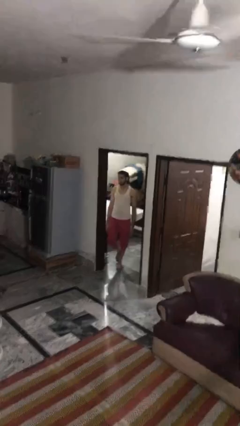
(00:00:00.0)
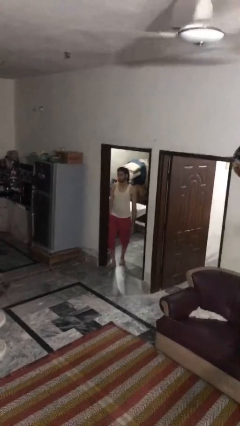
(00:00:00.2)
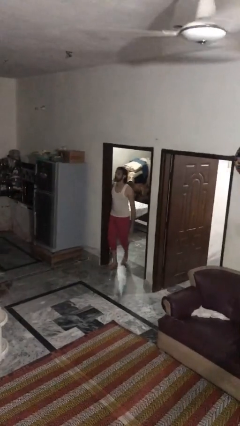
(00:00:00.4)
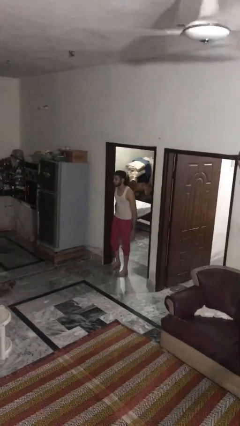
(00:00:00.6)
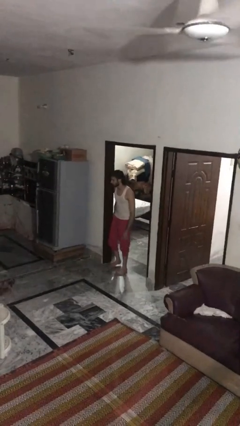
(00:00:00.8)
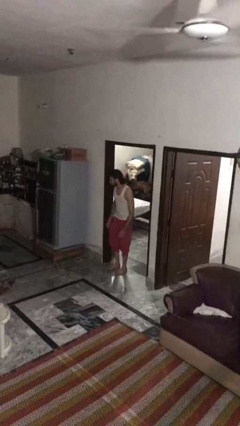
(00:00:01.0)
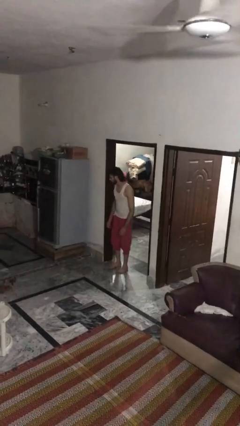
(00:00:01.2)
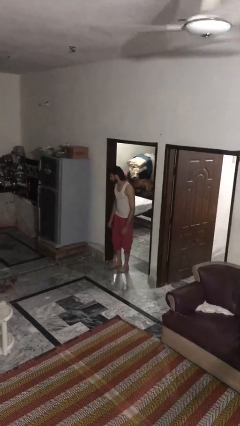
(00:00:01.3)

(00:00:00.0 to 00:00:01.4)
person bumps into wall

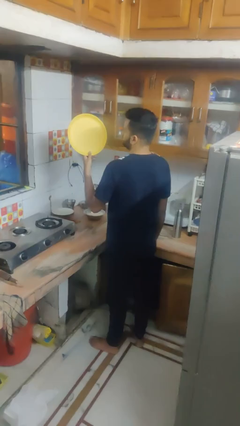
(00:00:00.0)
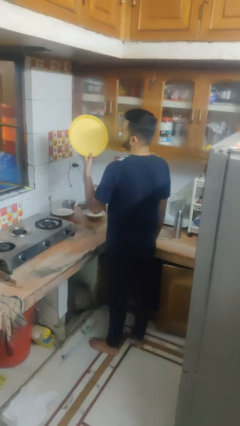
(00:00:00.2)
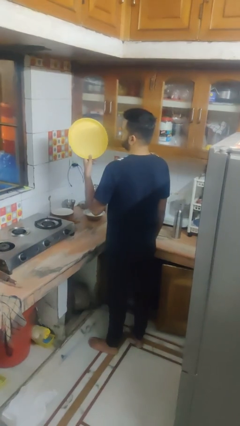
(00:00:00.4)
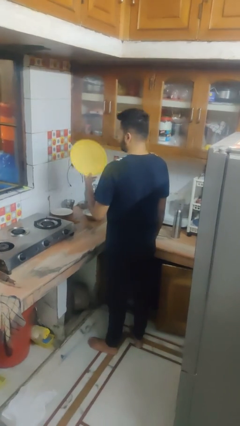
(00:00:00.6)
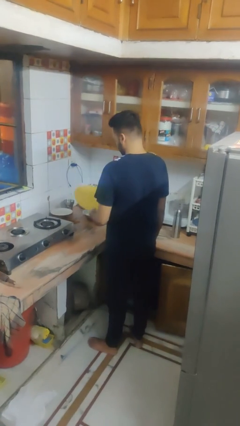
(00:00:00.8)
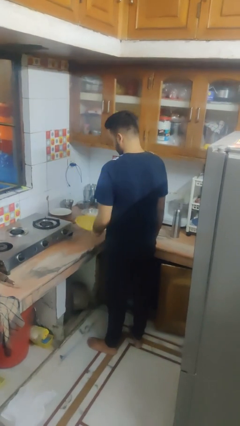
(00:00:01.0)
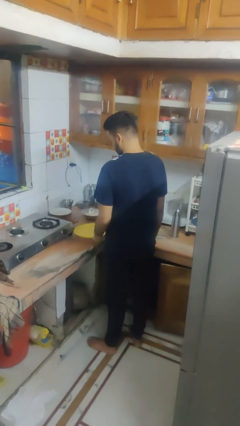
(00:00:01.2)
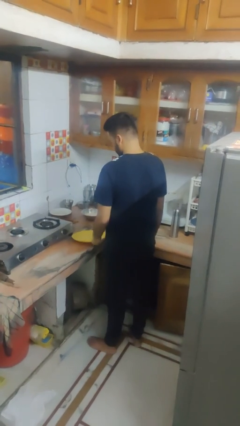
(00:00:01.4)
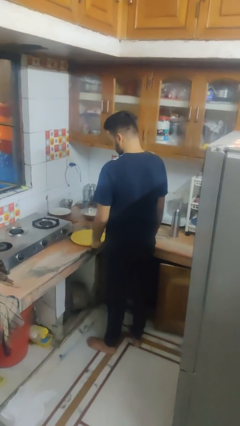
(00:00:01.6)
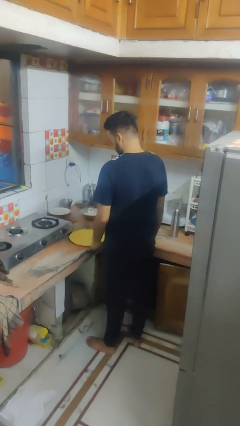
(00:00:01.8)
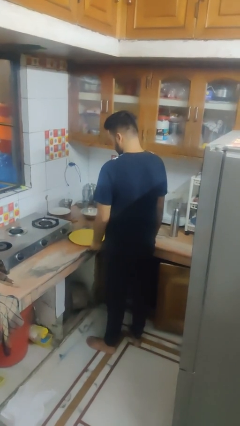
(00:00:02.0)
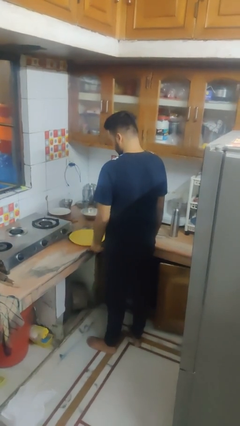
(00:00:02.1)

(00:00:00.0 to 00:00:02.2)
person puts down object on countertop

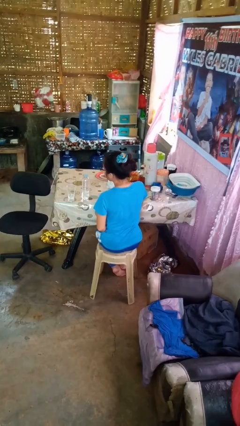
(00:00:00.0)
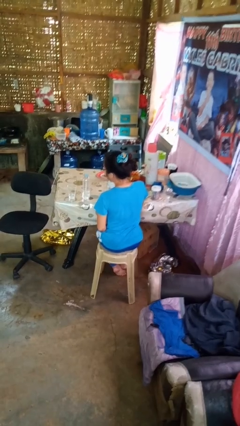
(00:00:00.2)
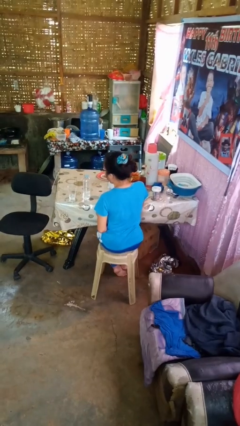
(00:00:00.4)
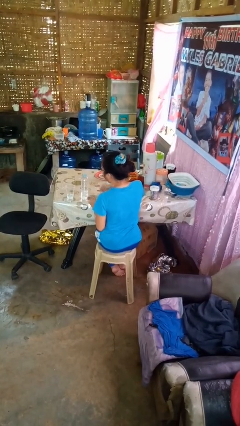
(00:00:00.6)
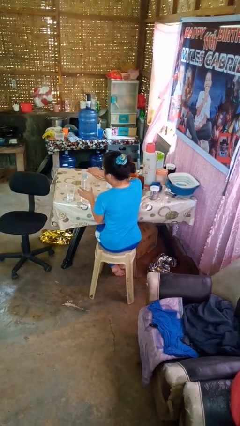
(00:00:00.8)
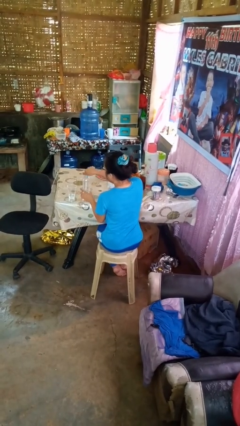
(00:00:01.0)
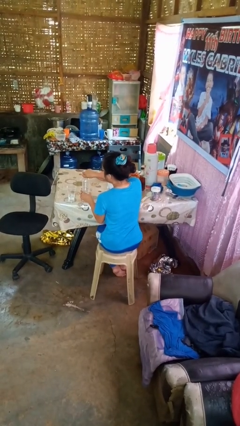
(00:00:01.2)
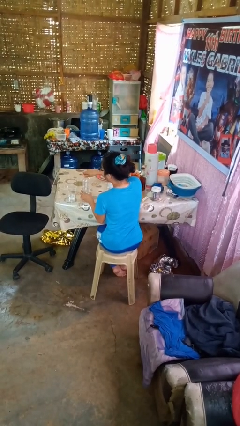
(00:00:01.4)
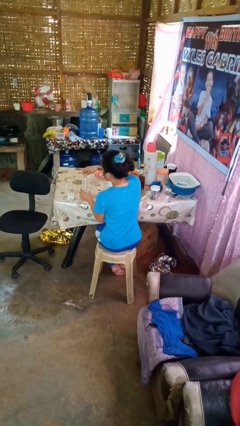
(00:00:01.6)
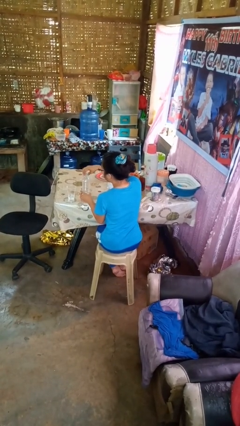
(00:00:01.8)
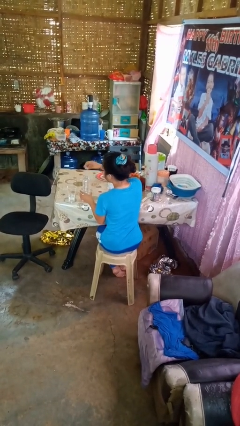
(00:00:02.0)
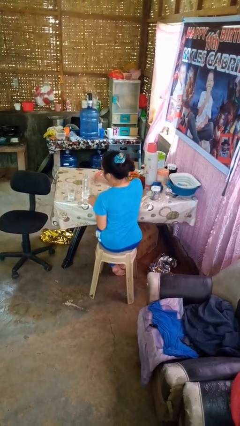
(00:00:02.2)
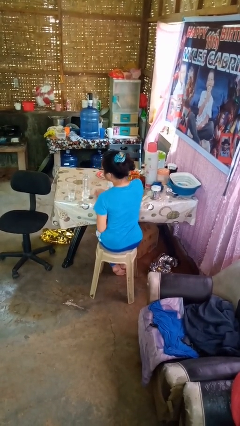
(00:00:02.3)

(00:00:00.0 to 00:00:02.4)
person unscrews lid from bottle

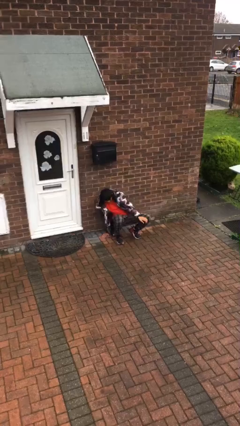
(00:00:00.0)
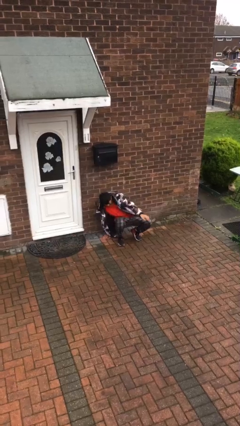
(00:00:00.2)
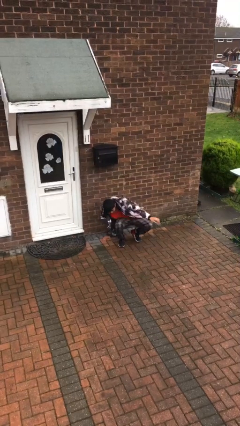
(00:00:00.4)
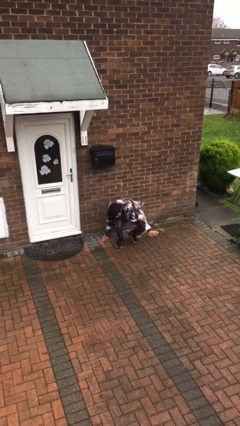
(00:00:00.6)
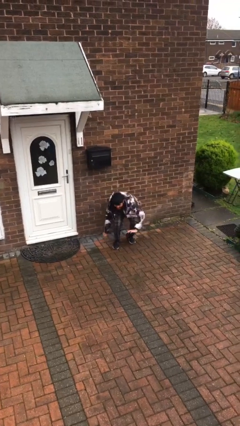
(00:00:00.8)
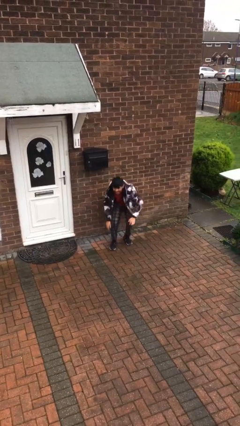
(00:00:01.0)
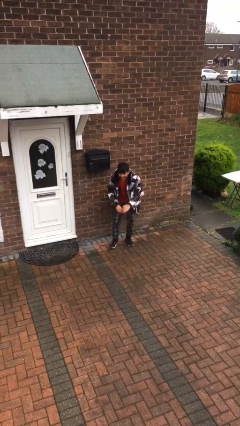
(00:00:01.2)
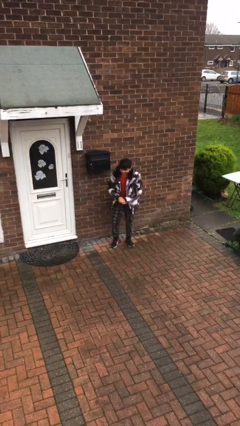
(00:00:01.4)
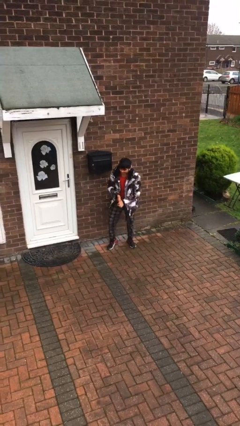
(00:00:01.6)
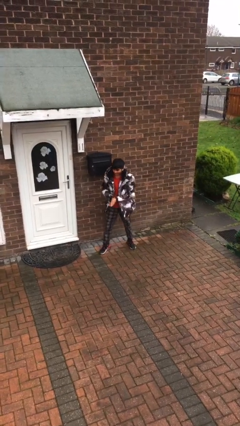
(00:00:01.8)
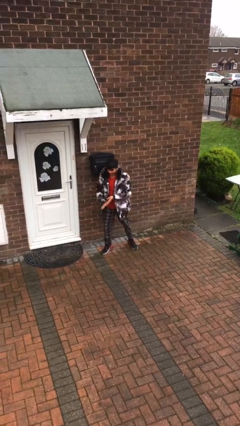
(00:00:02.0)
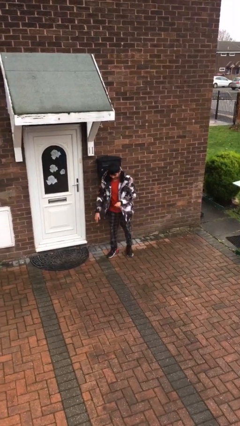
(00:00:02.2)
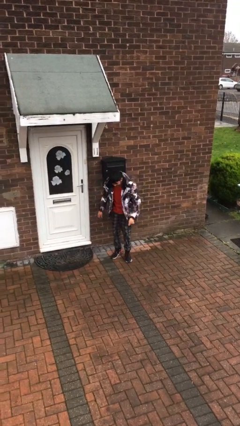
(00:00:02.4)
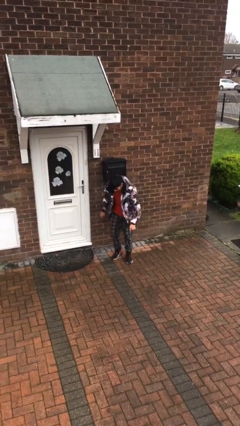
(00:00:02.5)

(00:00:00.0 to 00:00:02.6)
person stands up

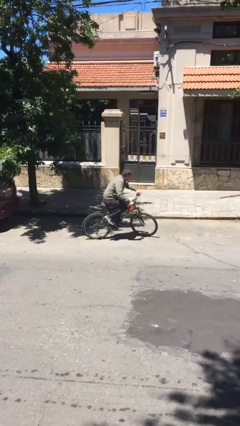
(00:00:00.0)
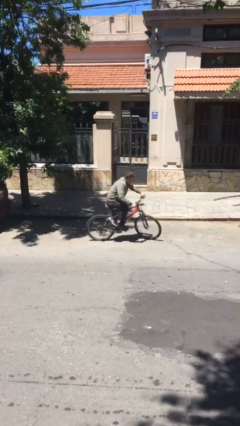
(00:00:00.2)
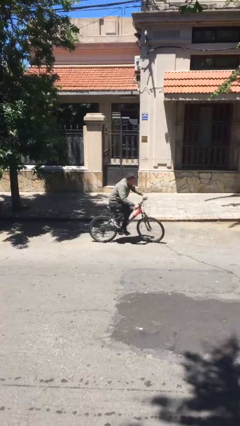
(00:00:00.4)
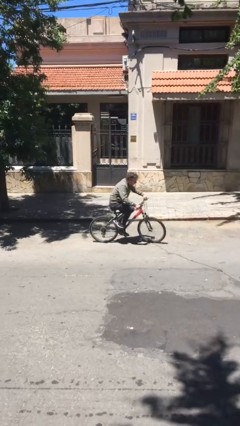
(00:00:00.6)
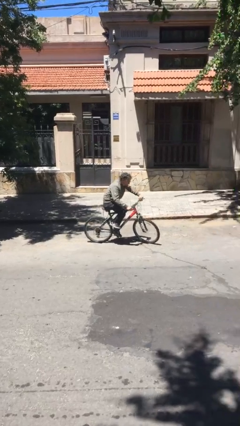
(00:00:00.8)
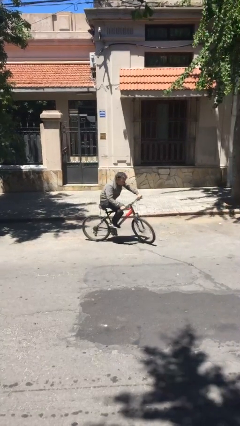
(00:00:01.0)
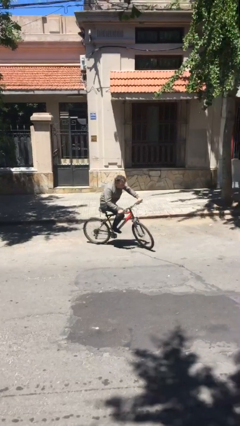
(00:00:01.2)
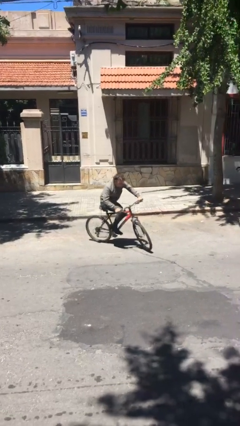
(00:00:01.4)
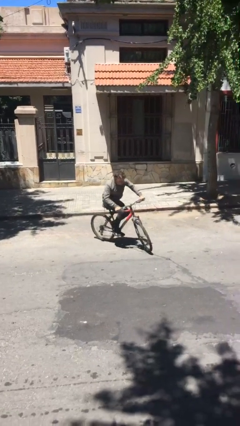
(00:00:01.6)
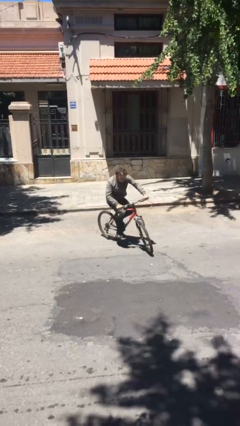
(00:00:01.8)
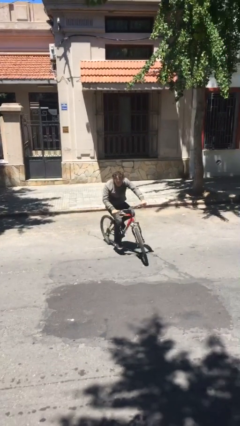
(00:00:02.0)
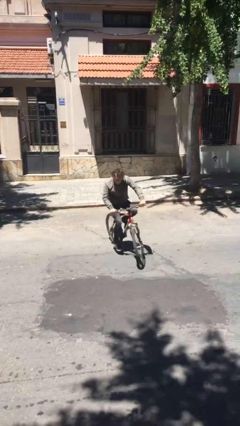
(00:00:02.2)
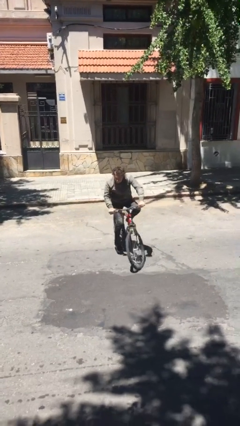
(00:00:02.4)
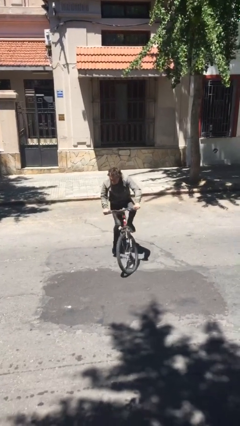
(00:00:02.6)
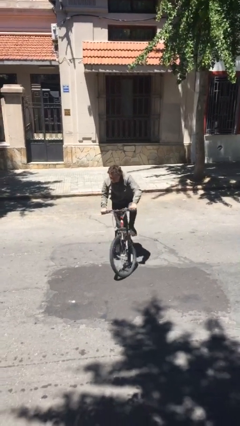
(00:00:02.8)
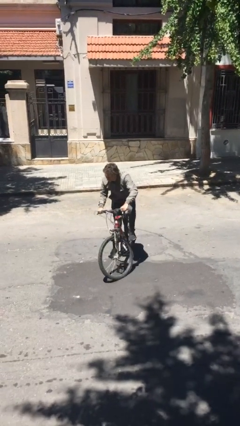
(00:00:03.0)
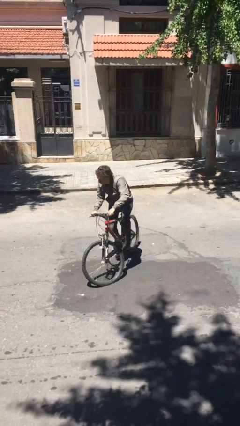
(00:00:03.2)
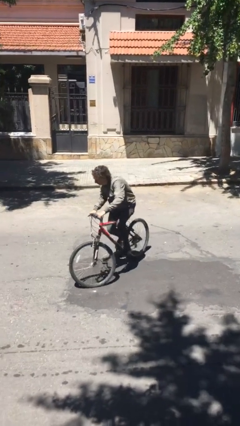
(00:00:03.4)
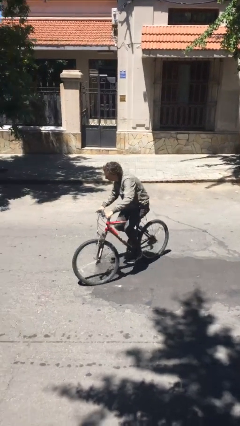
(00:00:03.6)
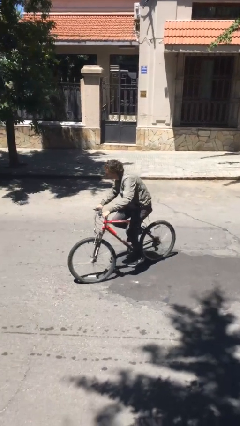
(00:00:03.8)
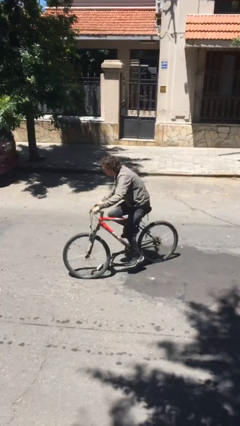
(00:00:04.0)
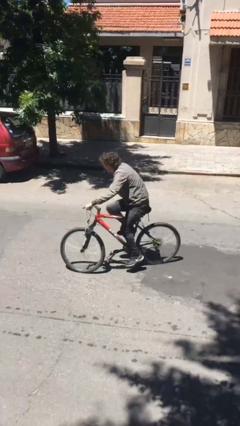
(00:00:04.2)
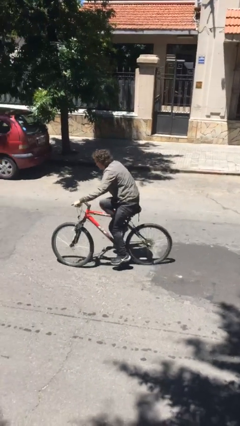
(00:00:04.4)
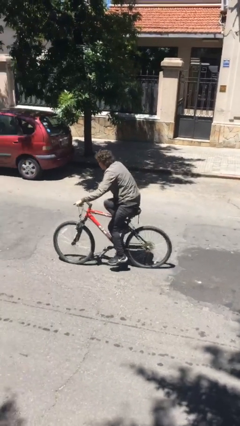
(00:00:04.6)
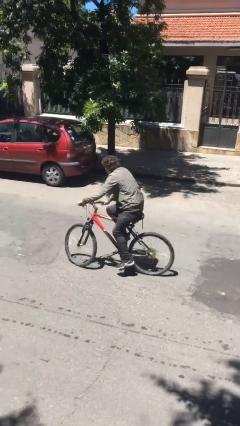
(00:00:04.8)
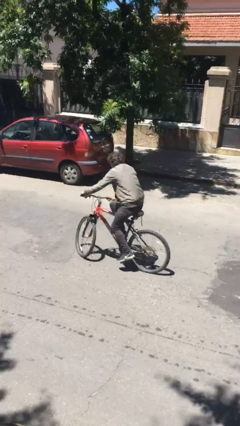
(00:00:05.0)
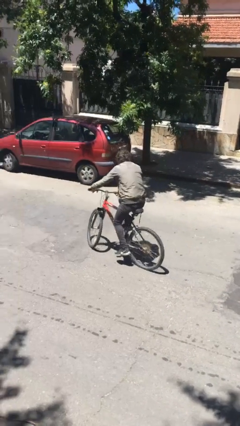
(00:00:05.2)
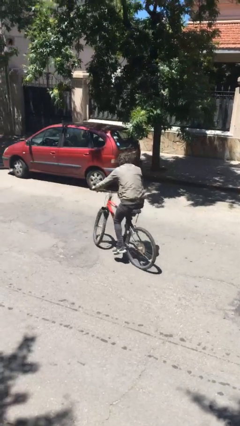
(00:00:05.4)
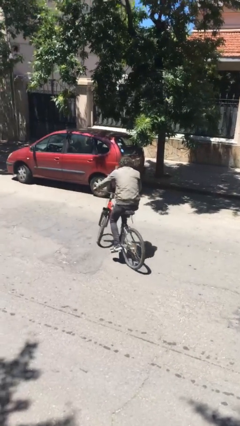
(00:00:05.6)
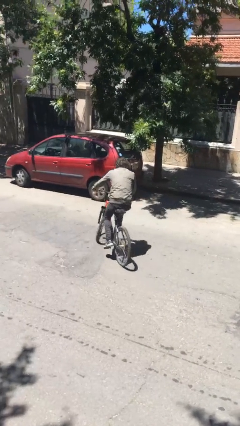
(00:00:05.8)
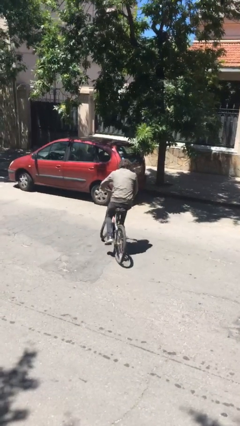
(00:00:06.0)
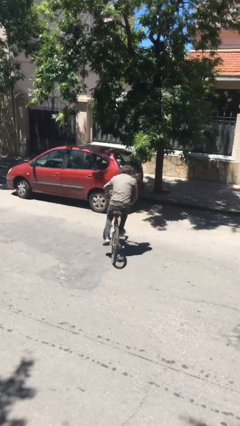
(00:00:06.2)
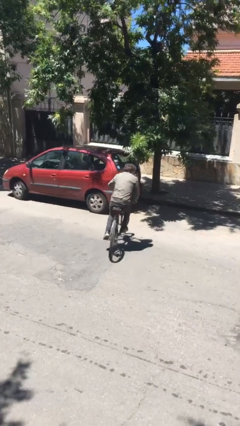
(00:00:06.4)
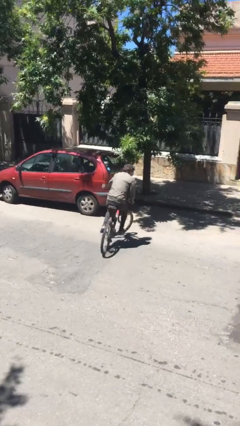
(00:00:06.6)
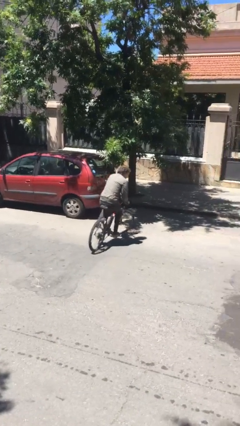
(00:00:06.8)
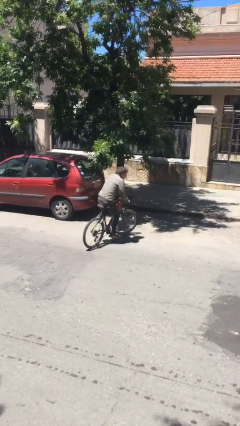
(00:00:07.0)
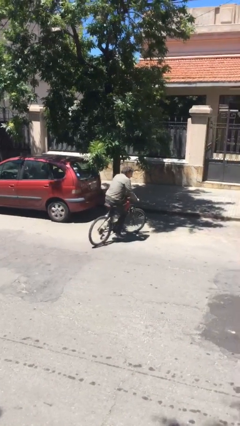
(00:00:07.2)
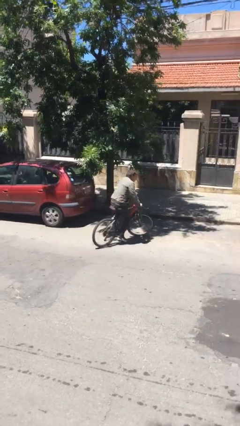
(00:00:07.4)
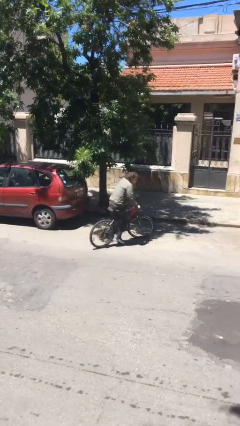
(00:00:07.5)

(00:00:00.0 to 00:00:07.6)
person rides bicycle

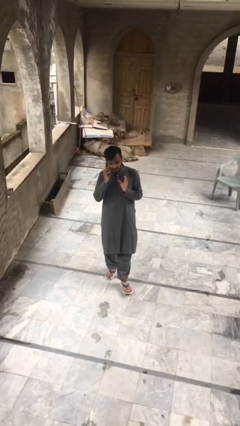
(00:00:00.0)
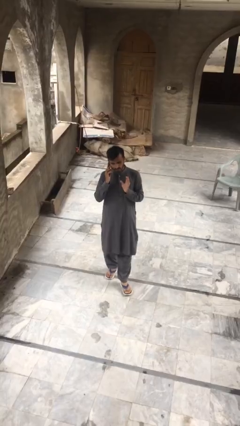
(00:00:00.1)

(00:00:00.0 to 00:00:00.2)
person texts on phone

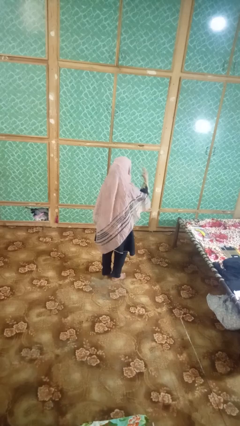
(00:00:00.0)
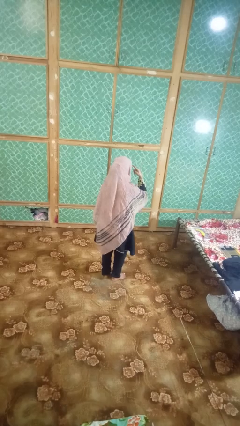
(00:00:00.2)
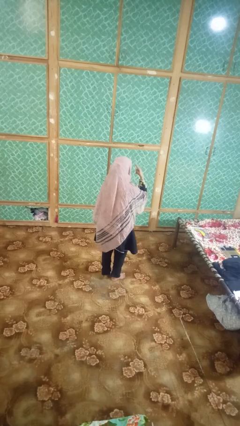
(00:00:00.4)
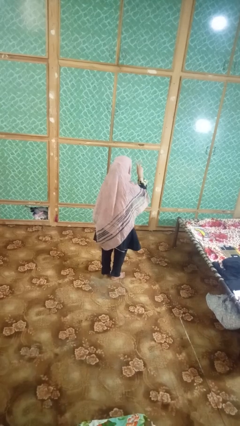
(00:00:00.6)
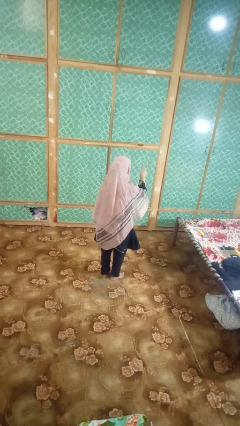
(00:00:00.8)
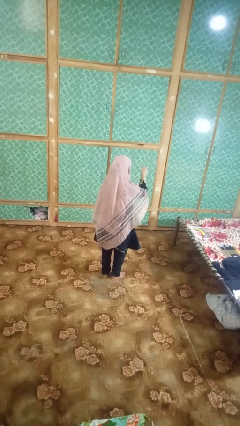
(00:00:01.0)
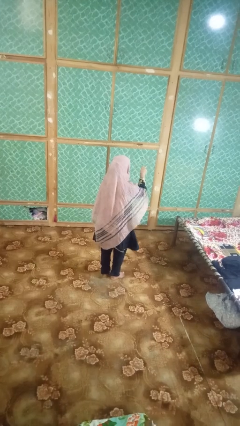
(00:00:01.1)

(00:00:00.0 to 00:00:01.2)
person gestures behind me
